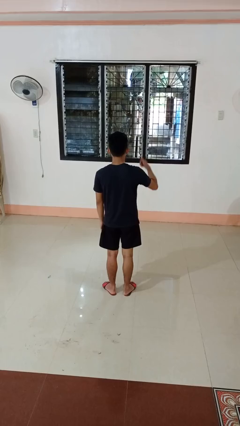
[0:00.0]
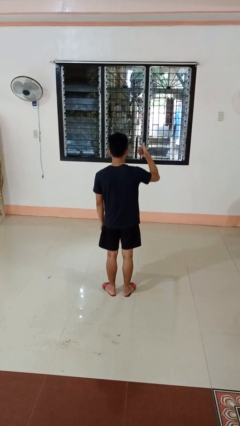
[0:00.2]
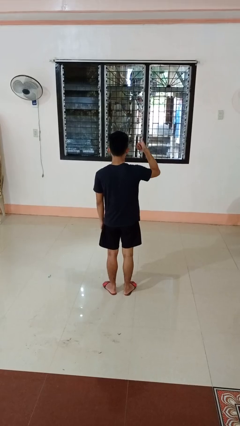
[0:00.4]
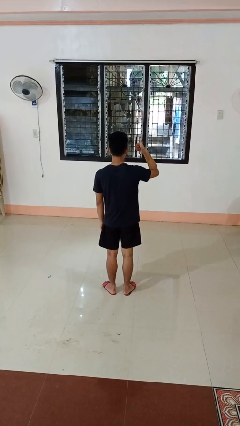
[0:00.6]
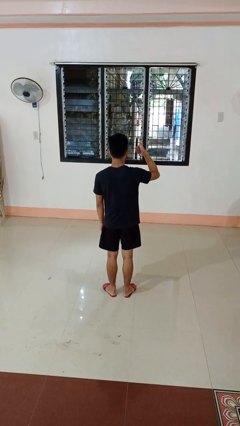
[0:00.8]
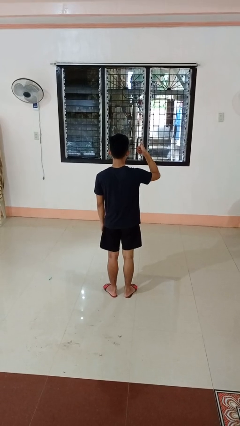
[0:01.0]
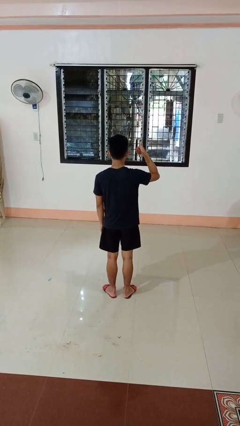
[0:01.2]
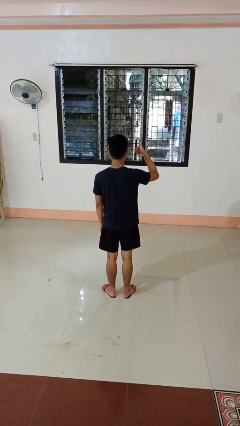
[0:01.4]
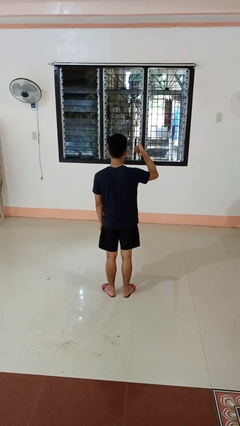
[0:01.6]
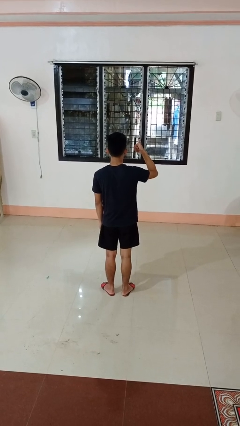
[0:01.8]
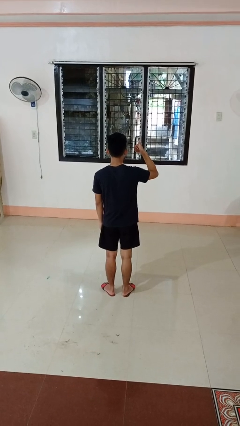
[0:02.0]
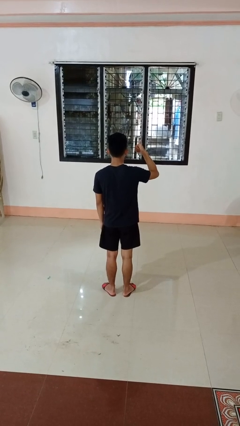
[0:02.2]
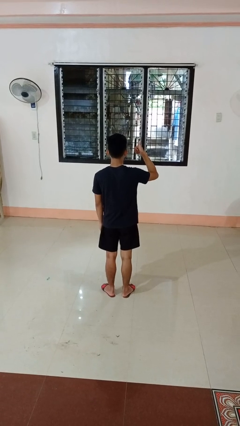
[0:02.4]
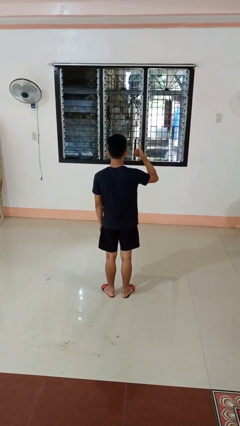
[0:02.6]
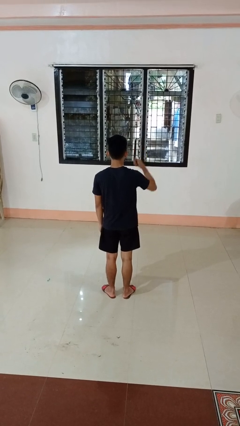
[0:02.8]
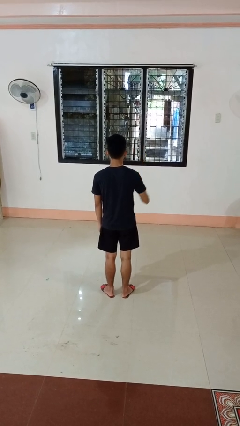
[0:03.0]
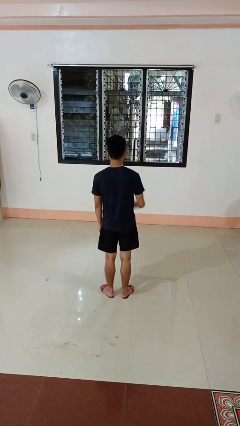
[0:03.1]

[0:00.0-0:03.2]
person gestures thumbs up

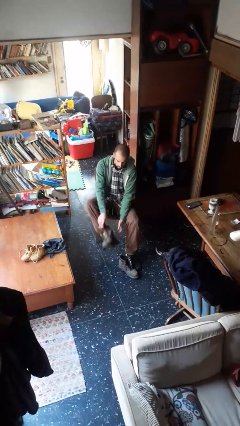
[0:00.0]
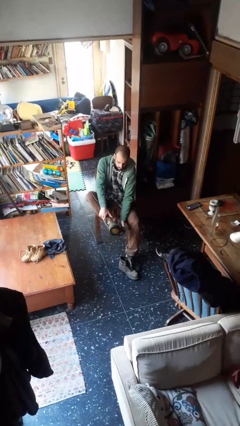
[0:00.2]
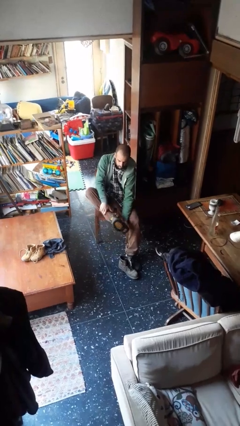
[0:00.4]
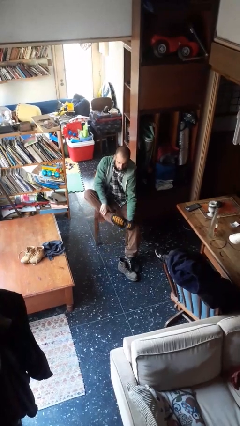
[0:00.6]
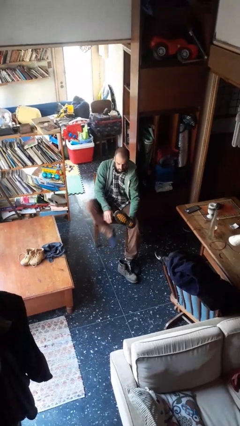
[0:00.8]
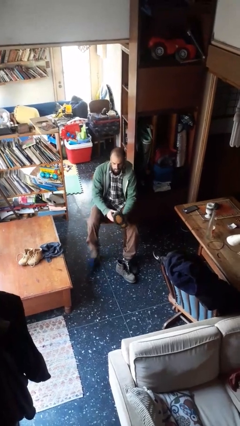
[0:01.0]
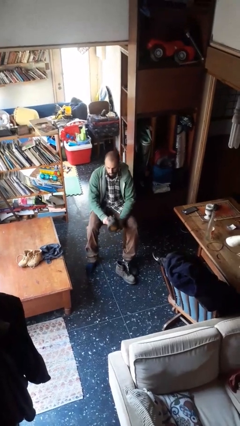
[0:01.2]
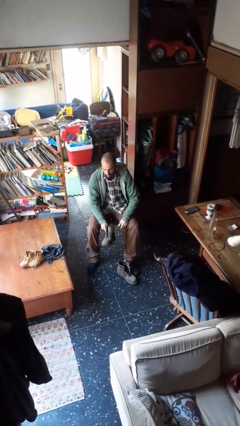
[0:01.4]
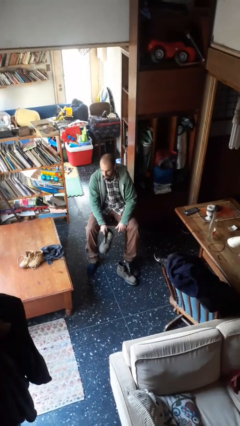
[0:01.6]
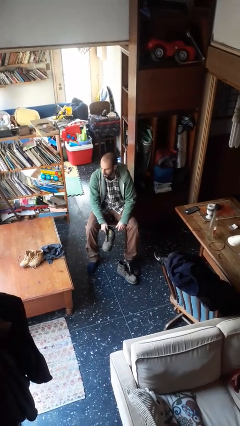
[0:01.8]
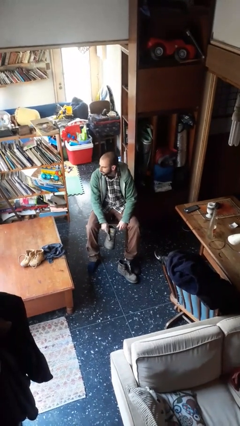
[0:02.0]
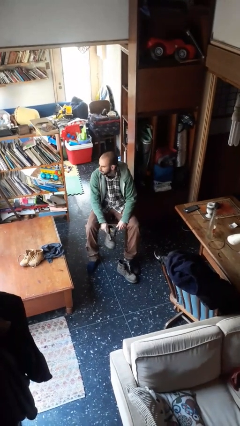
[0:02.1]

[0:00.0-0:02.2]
person takes off boots

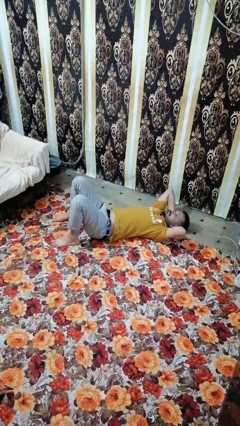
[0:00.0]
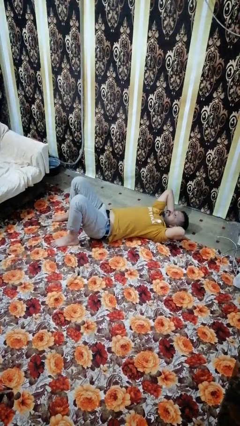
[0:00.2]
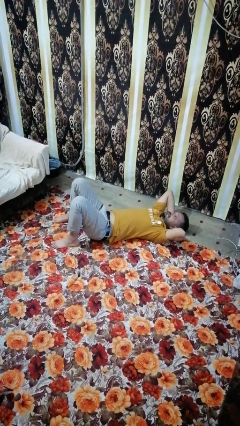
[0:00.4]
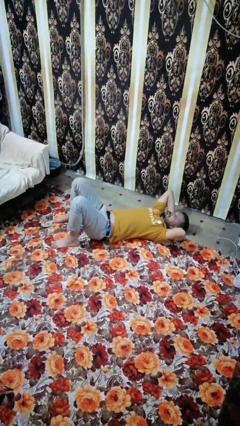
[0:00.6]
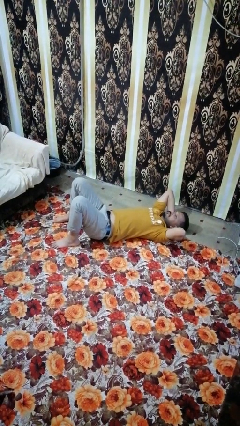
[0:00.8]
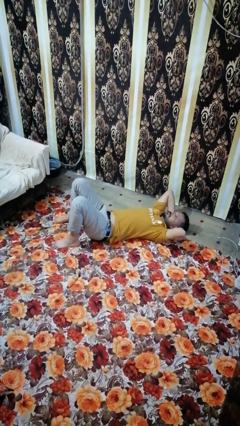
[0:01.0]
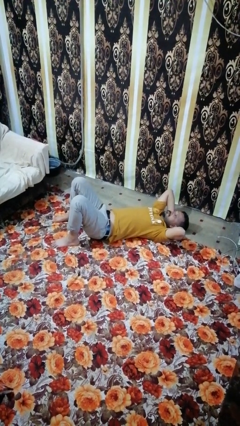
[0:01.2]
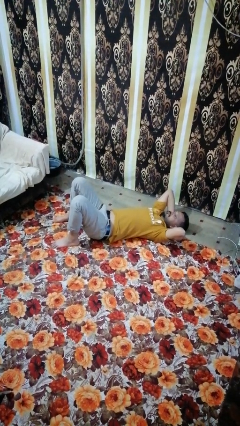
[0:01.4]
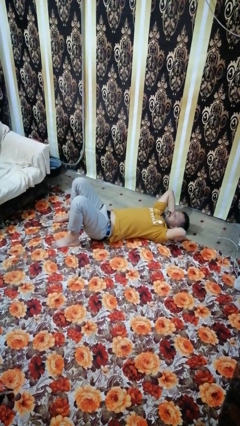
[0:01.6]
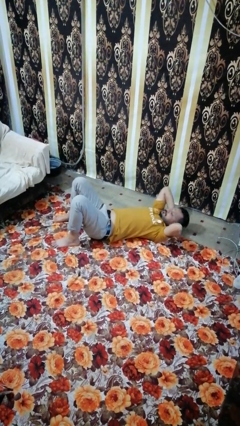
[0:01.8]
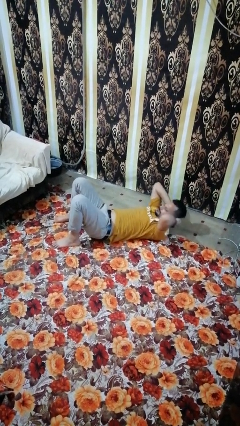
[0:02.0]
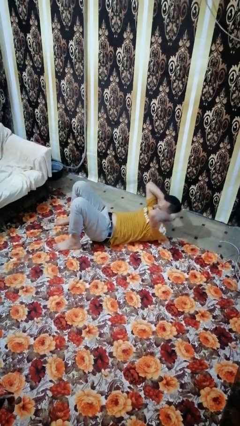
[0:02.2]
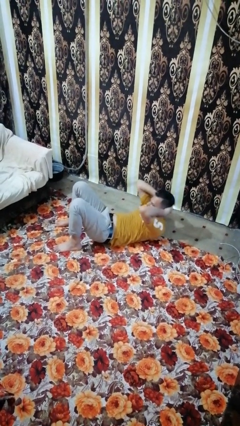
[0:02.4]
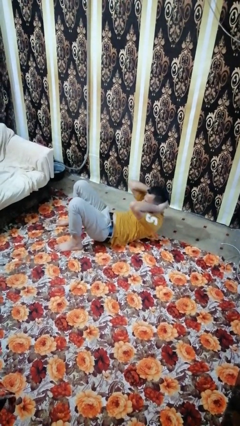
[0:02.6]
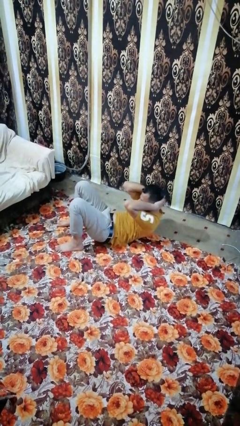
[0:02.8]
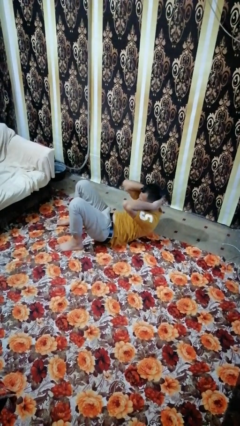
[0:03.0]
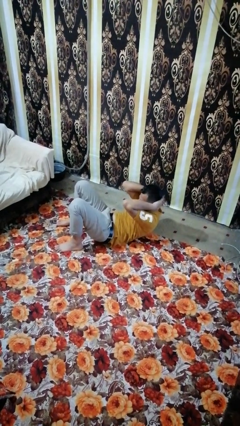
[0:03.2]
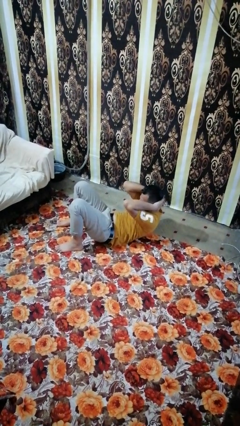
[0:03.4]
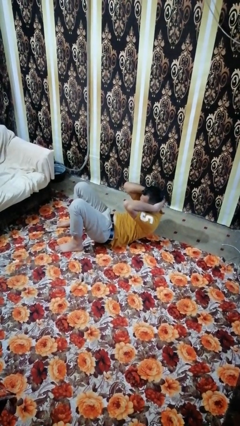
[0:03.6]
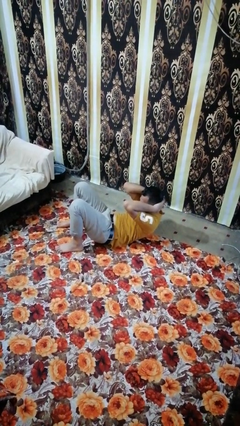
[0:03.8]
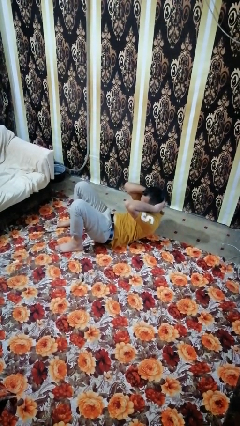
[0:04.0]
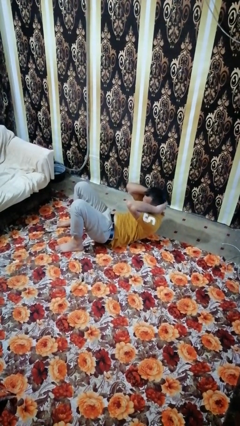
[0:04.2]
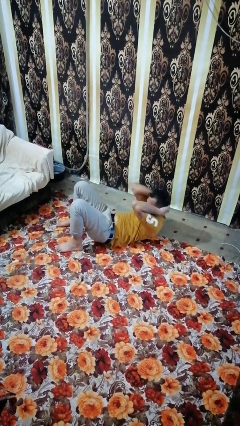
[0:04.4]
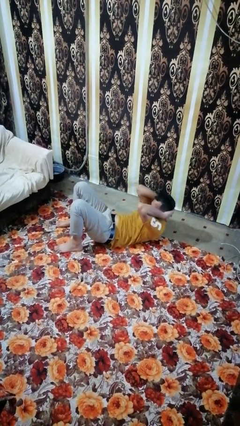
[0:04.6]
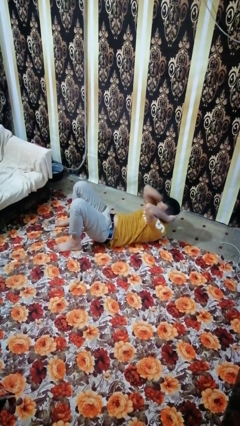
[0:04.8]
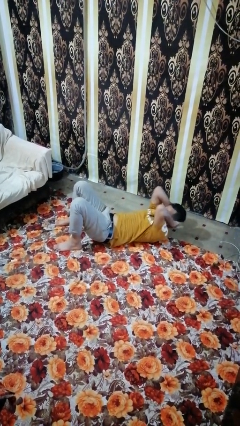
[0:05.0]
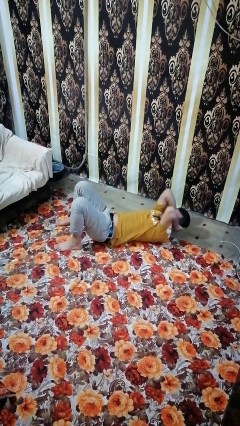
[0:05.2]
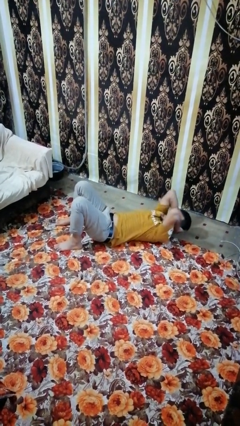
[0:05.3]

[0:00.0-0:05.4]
person exercises with situp

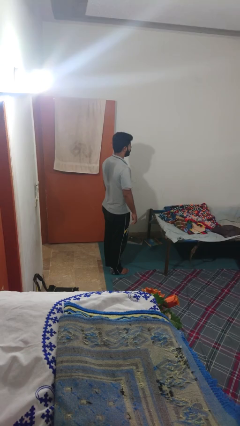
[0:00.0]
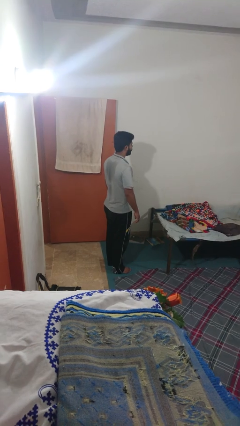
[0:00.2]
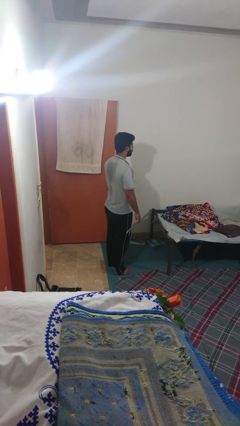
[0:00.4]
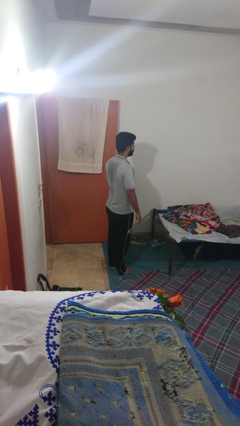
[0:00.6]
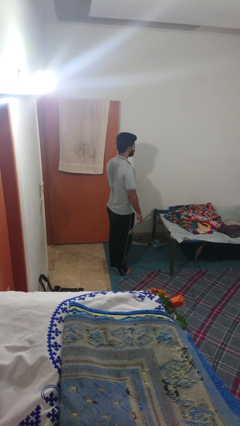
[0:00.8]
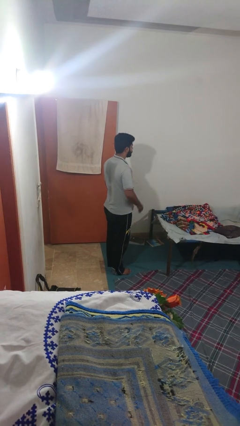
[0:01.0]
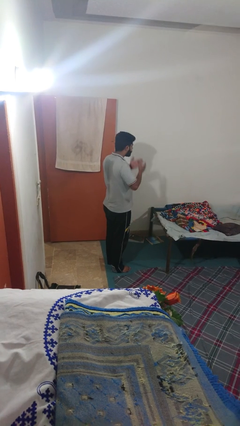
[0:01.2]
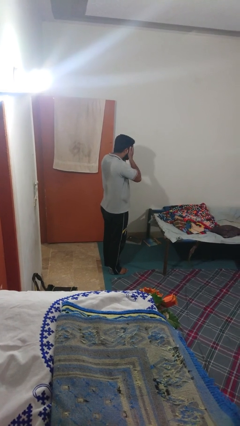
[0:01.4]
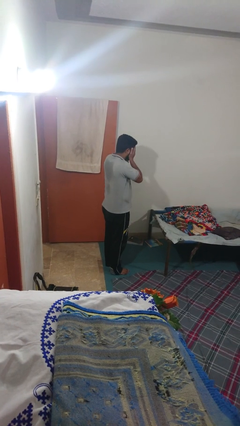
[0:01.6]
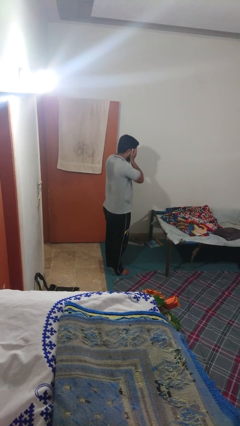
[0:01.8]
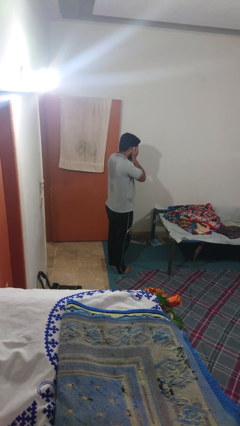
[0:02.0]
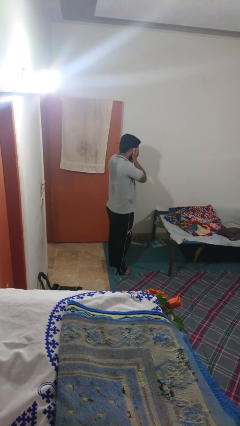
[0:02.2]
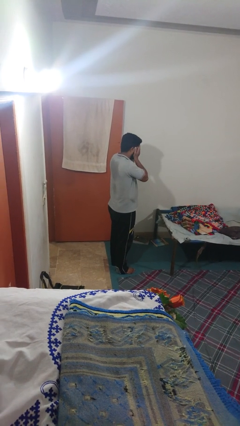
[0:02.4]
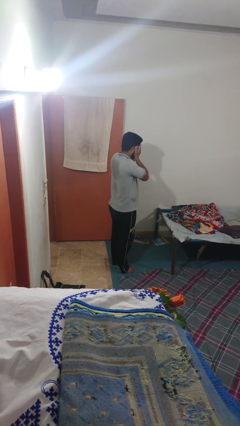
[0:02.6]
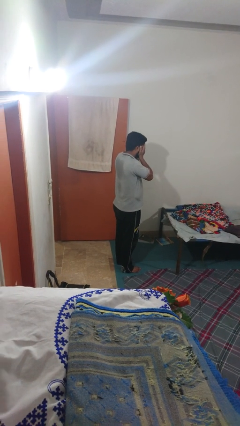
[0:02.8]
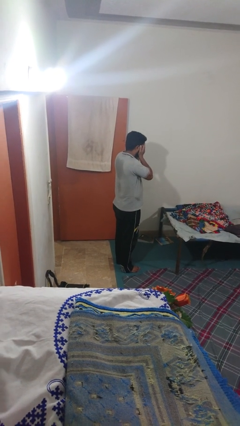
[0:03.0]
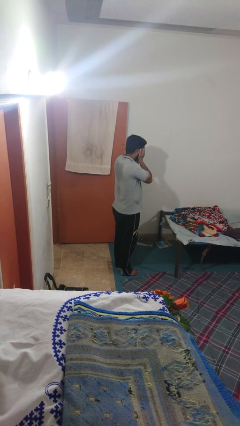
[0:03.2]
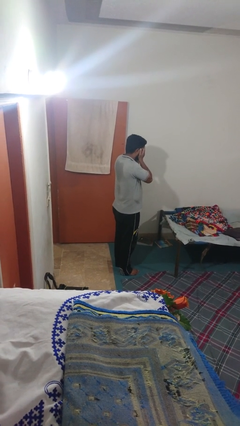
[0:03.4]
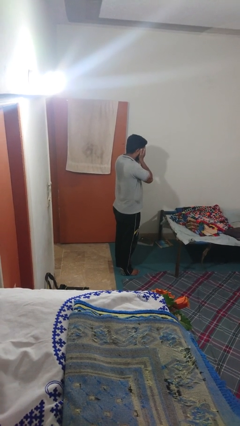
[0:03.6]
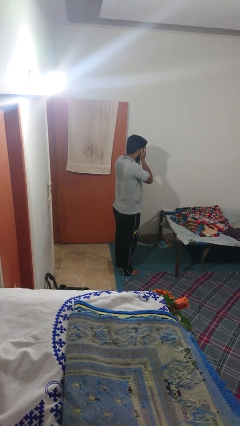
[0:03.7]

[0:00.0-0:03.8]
person covers face with hands

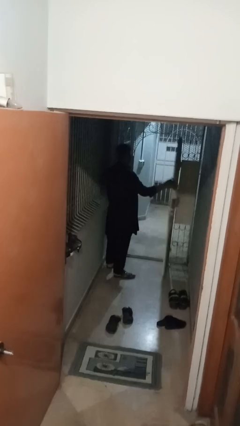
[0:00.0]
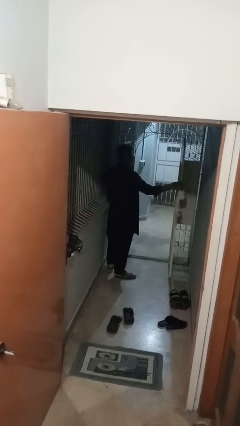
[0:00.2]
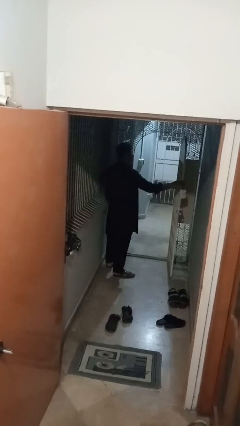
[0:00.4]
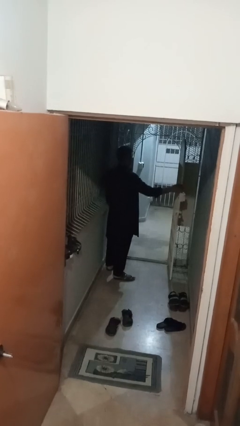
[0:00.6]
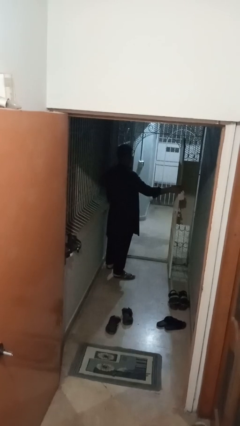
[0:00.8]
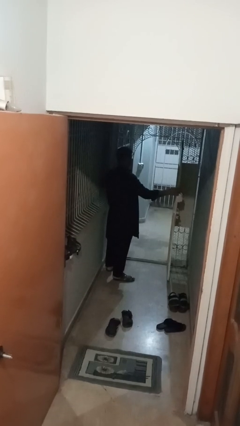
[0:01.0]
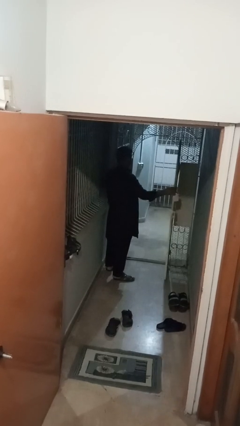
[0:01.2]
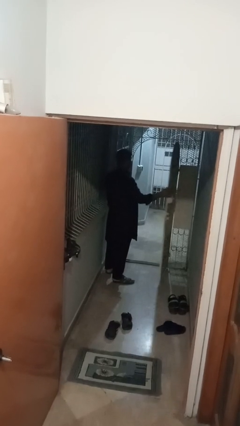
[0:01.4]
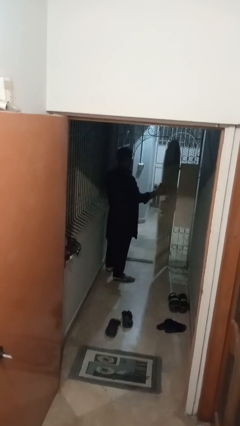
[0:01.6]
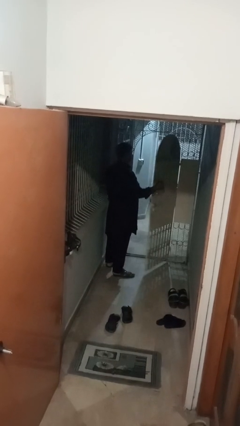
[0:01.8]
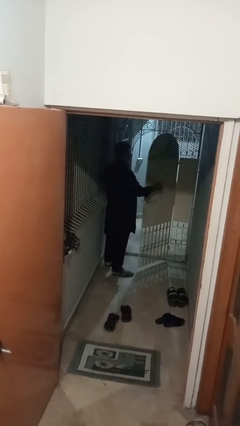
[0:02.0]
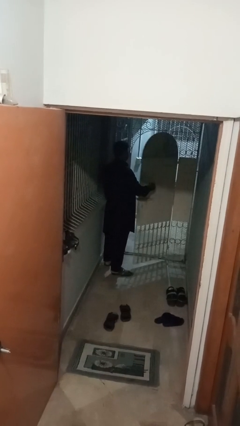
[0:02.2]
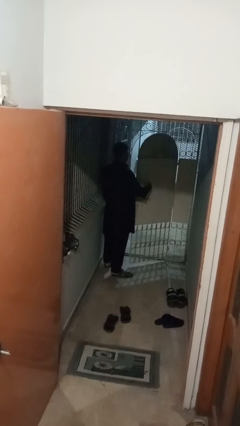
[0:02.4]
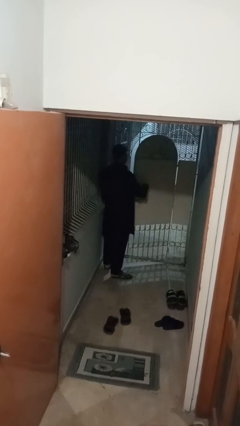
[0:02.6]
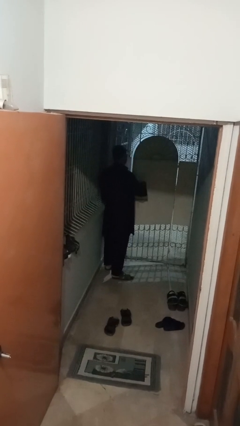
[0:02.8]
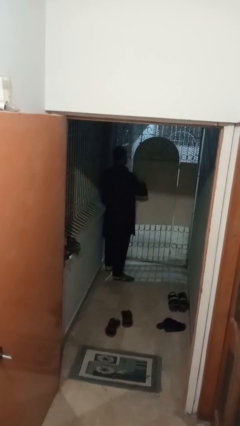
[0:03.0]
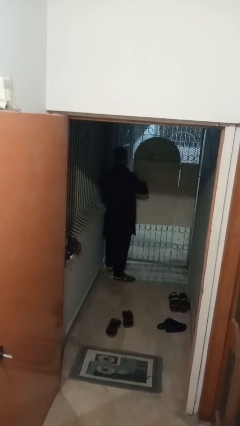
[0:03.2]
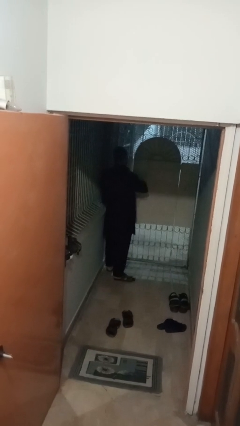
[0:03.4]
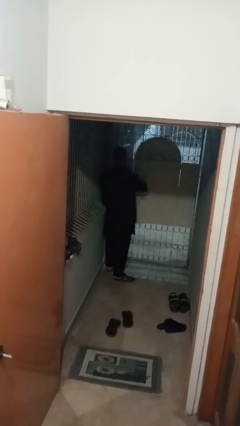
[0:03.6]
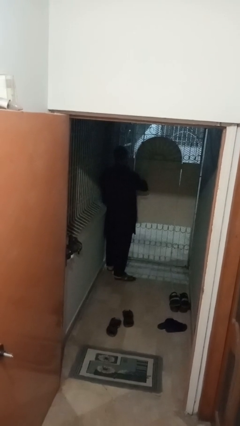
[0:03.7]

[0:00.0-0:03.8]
person closes gate
